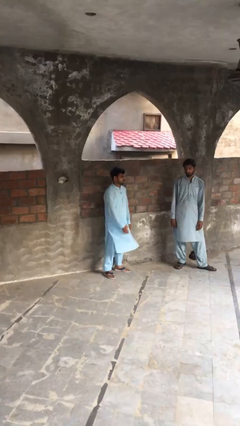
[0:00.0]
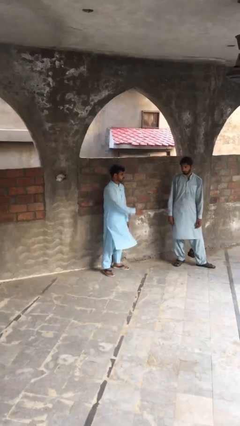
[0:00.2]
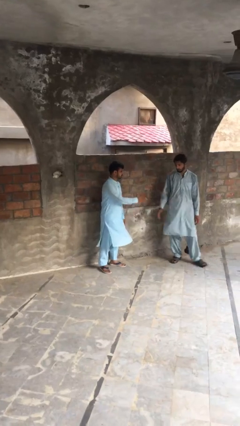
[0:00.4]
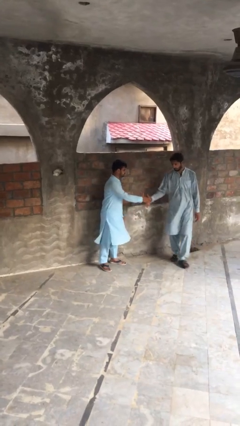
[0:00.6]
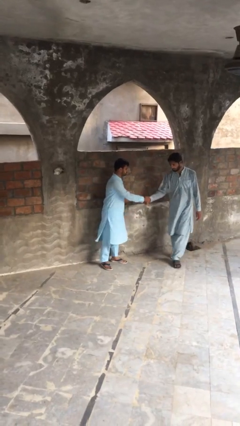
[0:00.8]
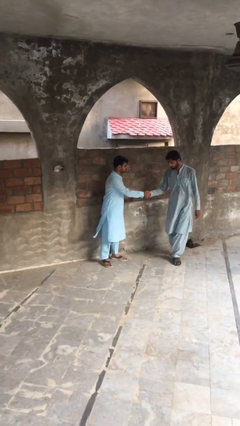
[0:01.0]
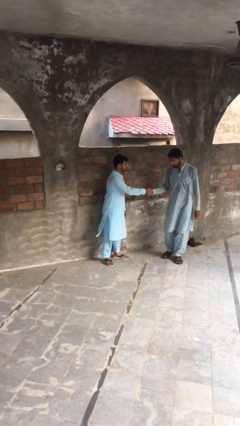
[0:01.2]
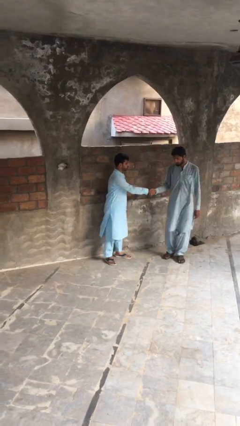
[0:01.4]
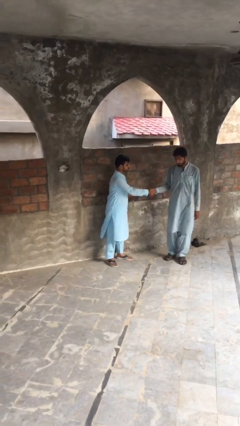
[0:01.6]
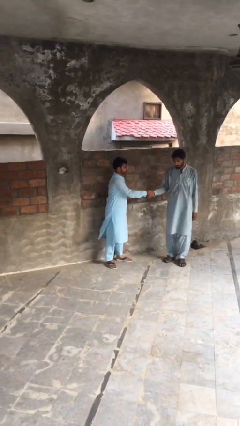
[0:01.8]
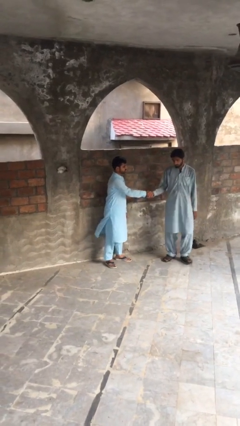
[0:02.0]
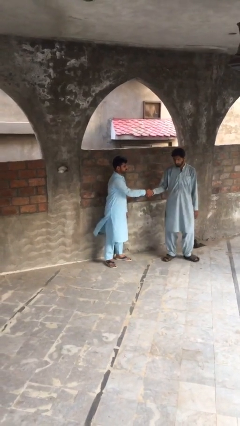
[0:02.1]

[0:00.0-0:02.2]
person shakes hand

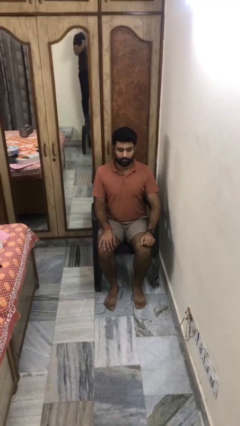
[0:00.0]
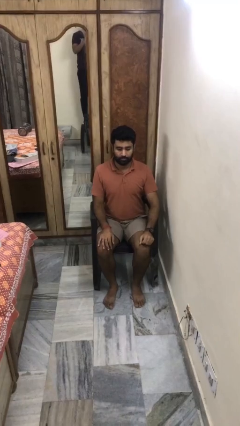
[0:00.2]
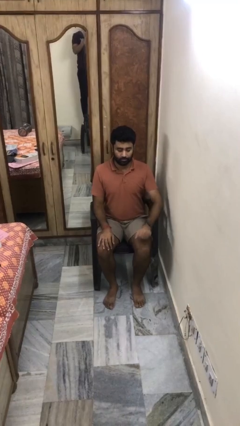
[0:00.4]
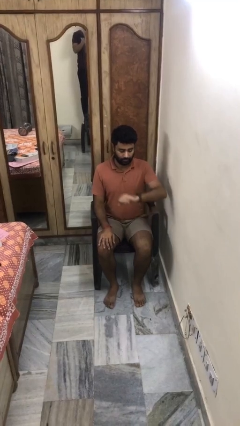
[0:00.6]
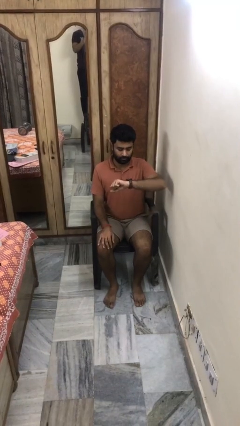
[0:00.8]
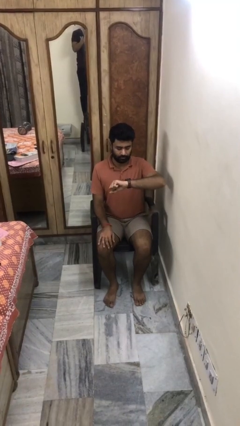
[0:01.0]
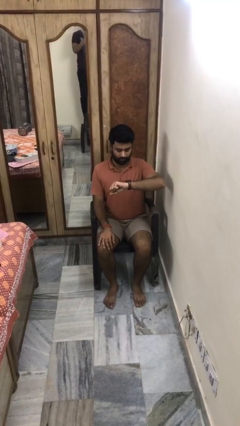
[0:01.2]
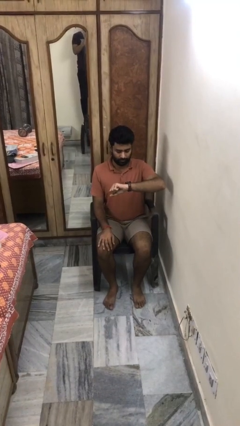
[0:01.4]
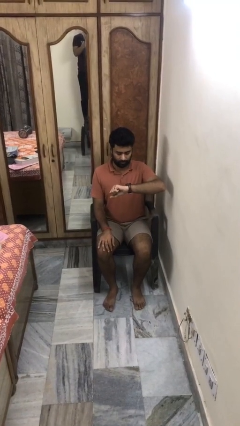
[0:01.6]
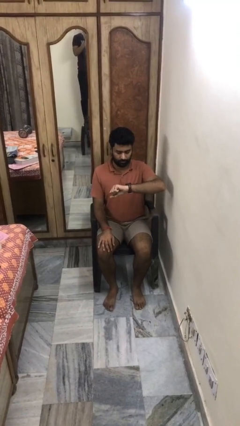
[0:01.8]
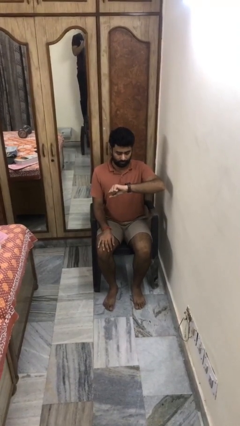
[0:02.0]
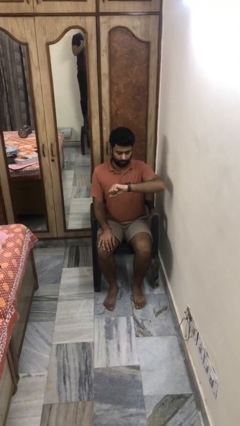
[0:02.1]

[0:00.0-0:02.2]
person looks at wristwatch

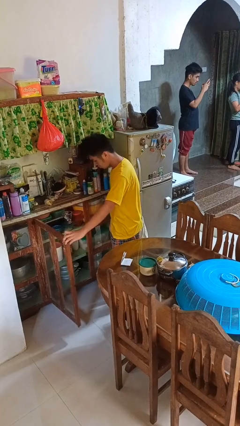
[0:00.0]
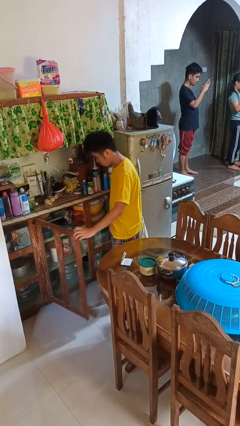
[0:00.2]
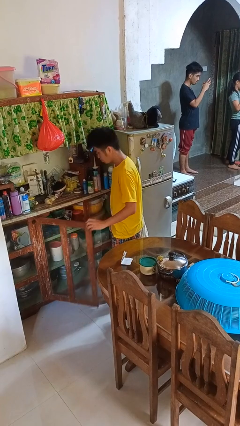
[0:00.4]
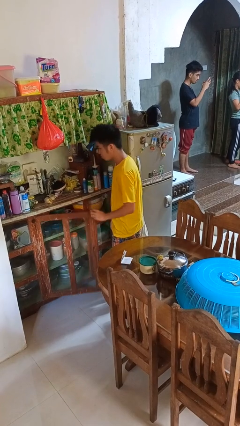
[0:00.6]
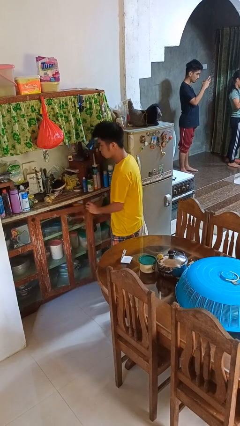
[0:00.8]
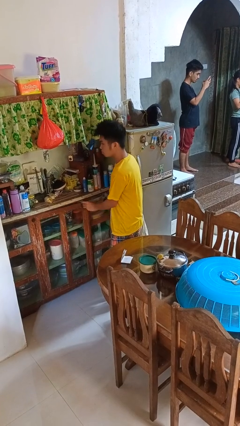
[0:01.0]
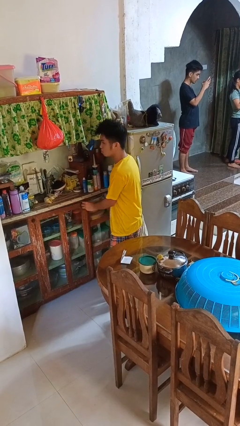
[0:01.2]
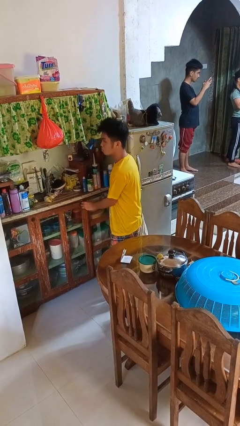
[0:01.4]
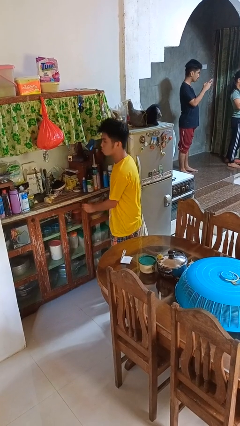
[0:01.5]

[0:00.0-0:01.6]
person closes cabinet

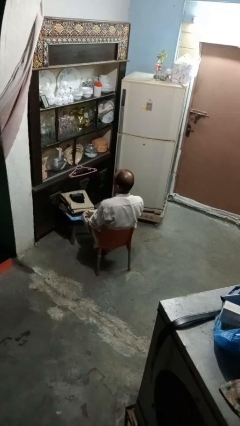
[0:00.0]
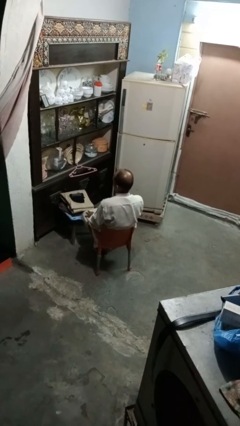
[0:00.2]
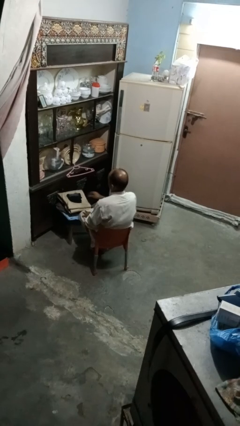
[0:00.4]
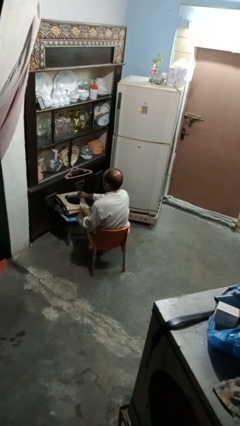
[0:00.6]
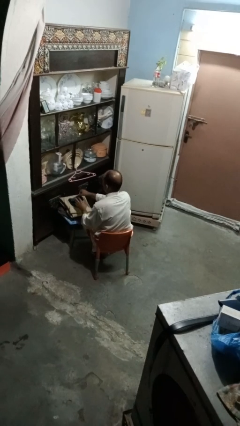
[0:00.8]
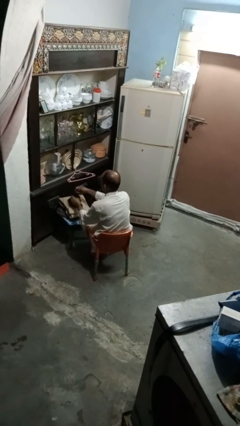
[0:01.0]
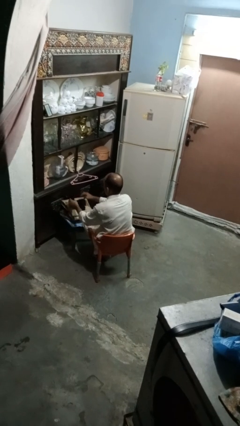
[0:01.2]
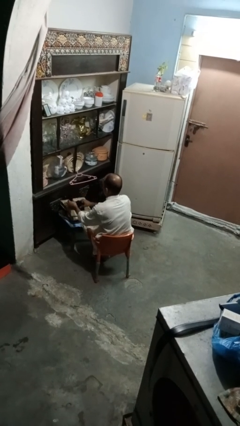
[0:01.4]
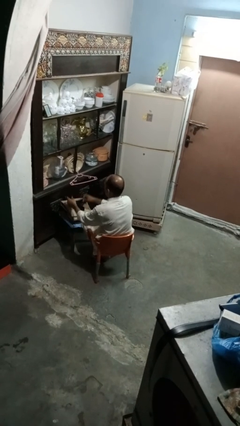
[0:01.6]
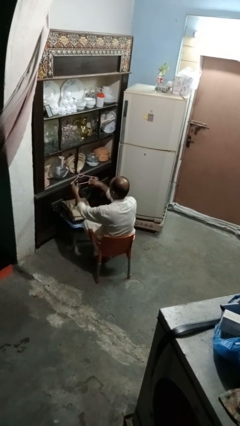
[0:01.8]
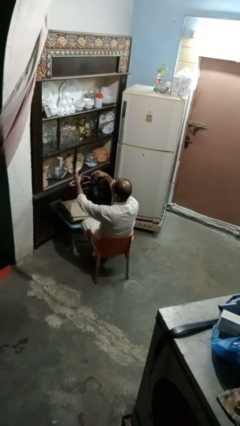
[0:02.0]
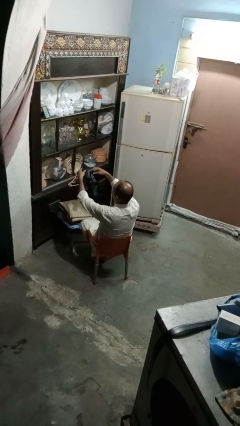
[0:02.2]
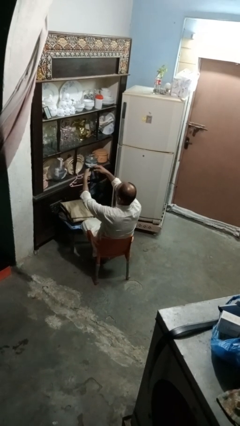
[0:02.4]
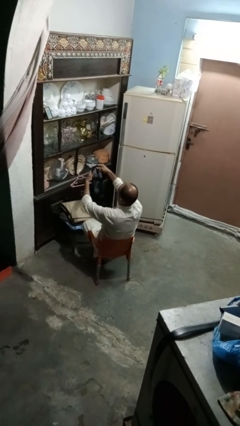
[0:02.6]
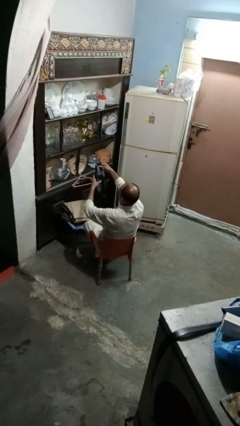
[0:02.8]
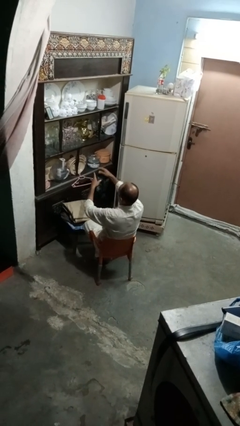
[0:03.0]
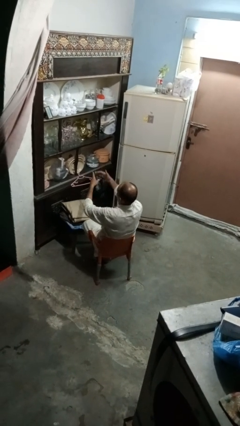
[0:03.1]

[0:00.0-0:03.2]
person folds socks

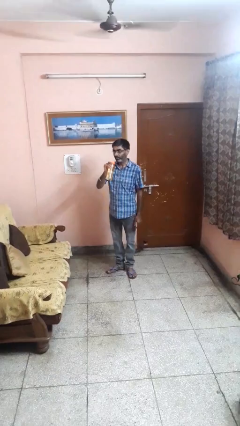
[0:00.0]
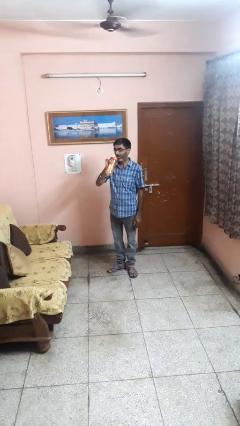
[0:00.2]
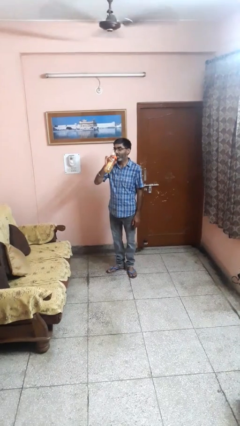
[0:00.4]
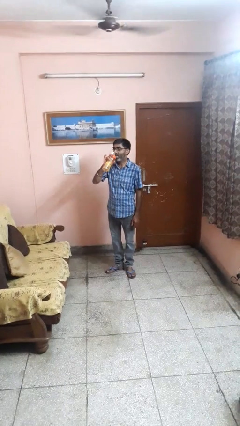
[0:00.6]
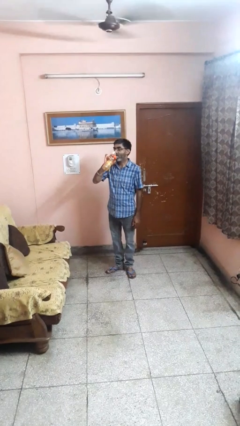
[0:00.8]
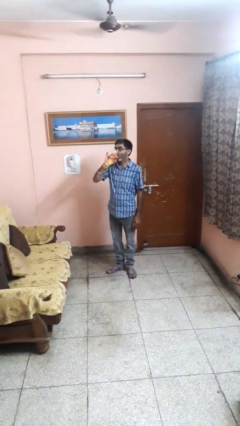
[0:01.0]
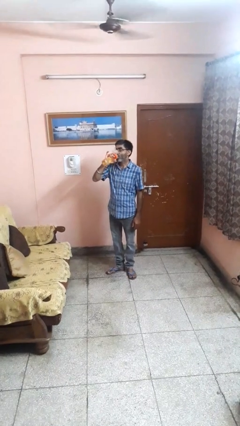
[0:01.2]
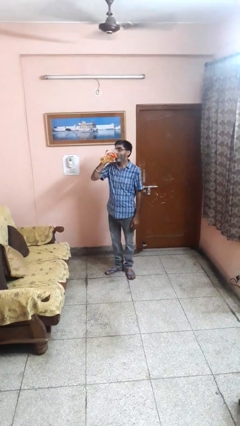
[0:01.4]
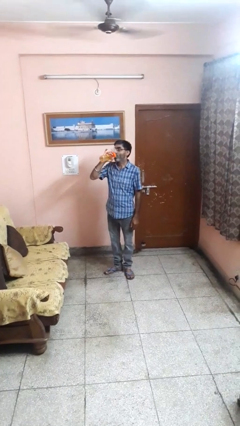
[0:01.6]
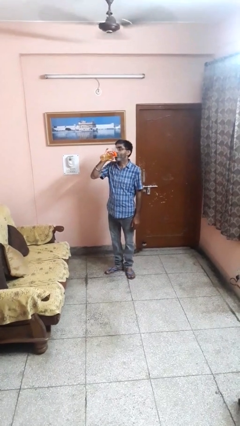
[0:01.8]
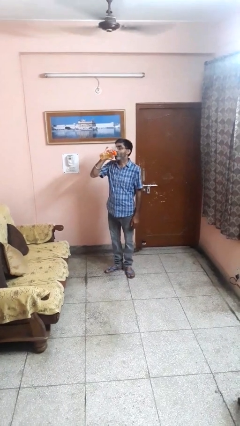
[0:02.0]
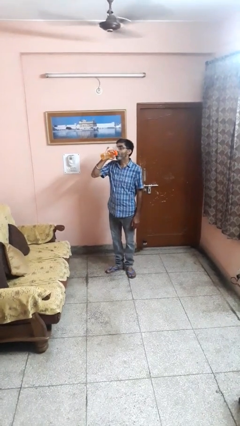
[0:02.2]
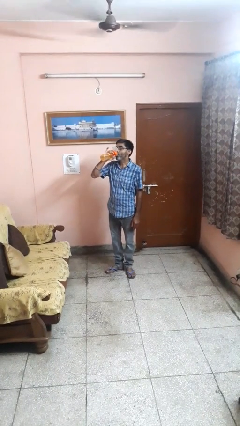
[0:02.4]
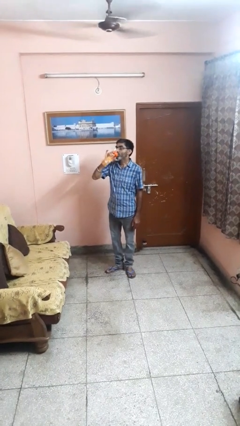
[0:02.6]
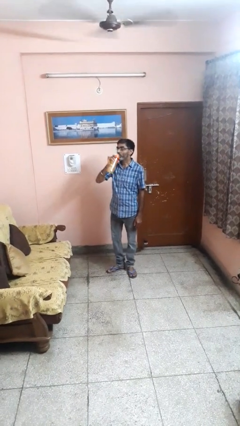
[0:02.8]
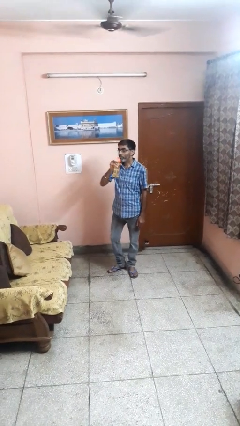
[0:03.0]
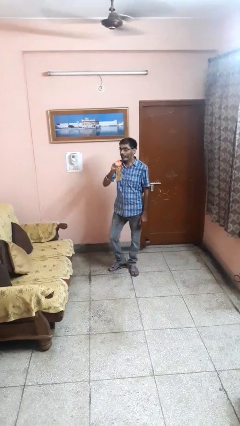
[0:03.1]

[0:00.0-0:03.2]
person drinks from bottle

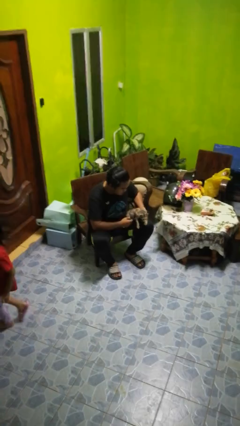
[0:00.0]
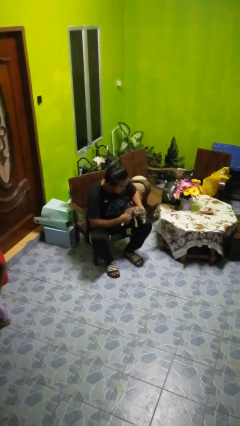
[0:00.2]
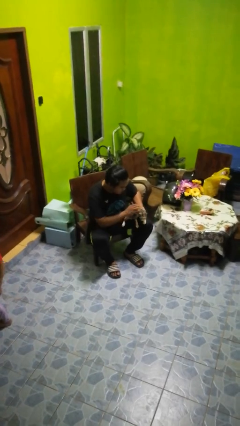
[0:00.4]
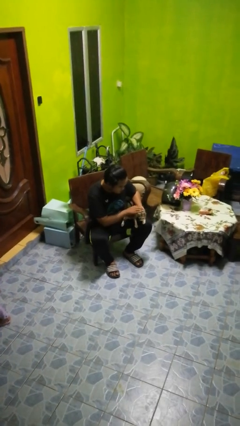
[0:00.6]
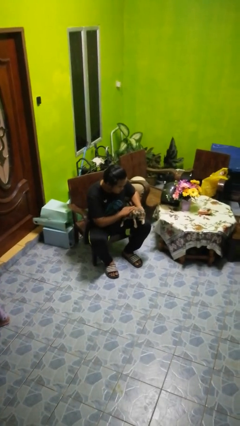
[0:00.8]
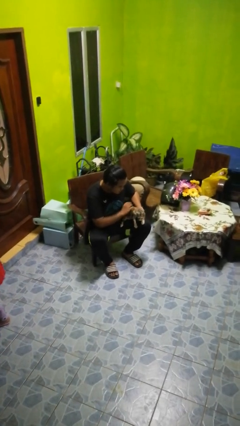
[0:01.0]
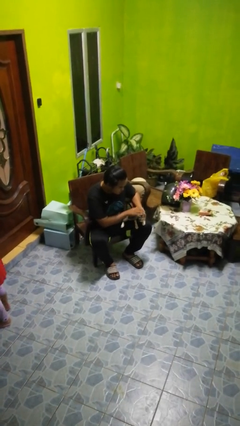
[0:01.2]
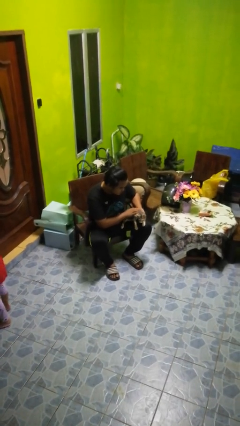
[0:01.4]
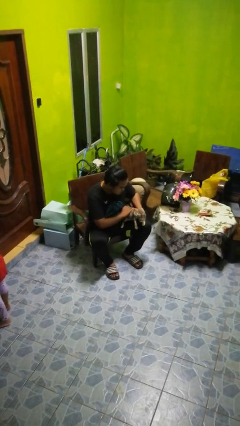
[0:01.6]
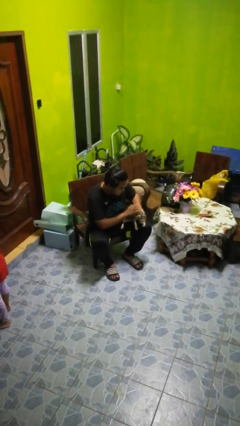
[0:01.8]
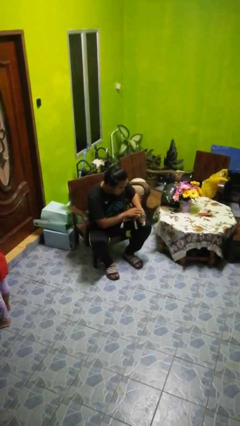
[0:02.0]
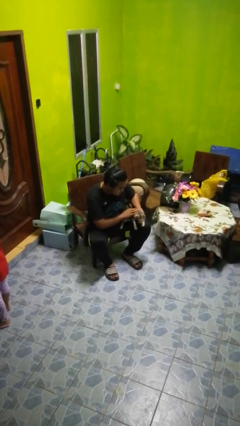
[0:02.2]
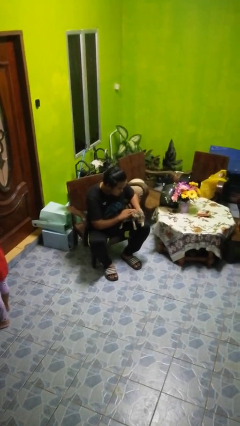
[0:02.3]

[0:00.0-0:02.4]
person pets cat

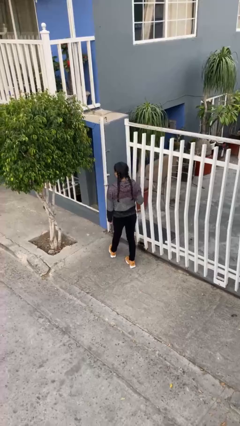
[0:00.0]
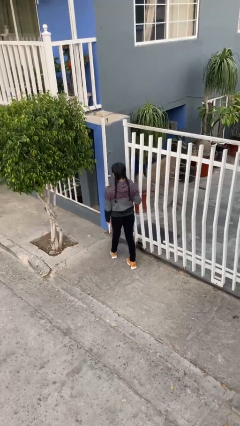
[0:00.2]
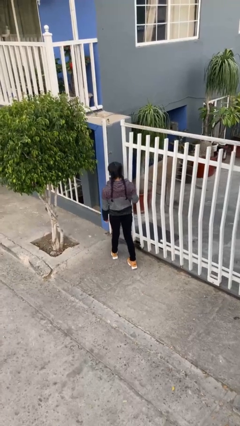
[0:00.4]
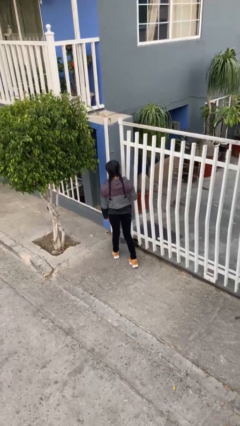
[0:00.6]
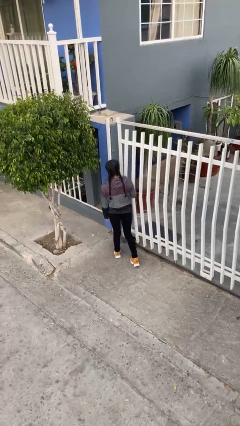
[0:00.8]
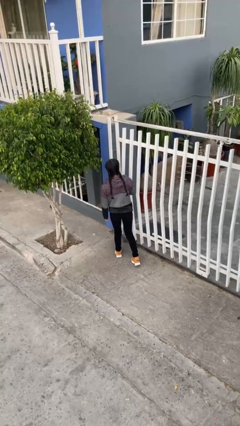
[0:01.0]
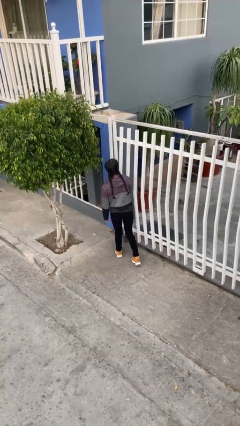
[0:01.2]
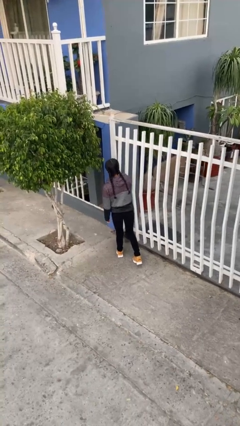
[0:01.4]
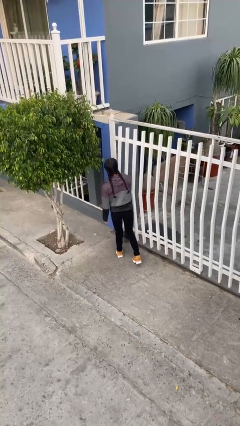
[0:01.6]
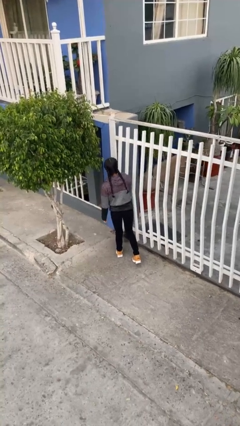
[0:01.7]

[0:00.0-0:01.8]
person closes facility door
